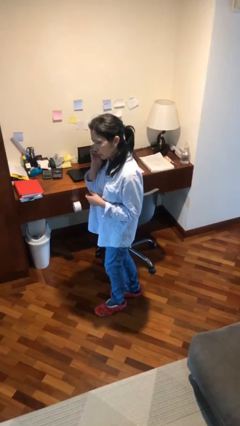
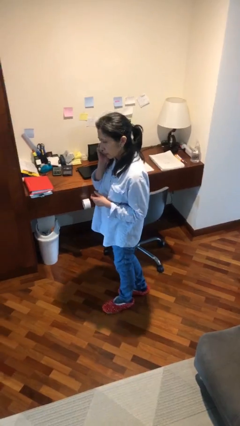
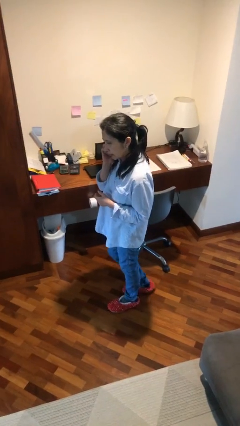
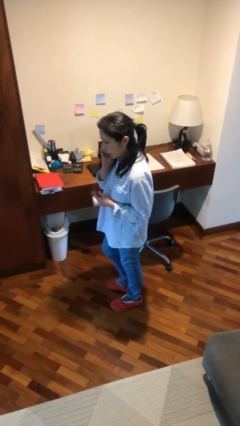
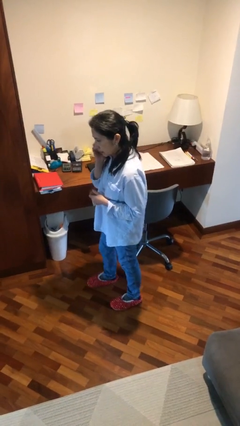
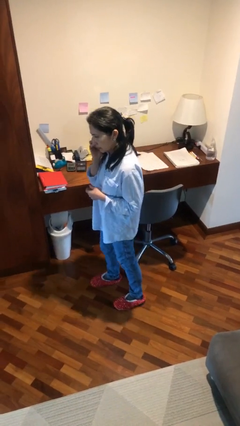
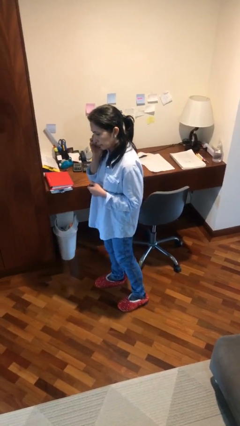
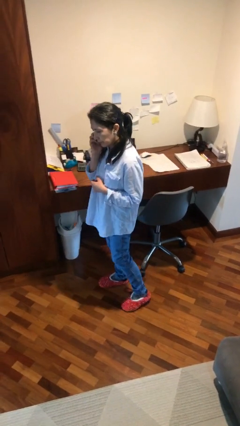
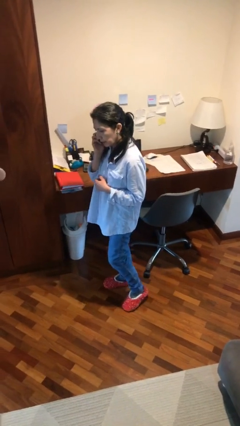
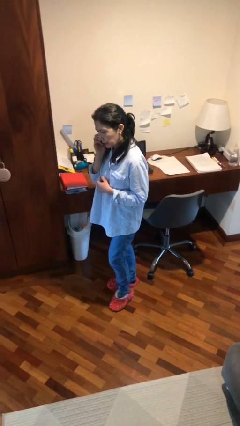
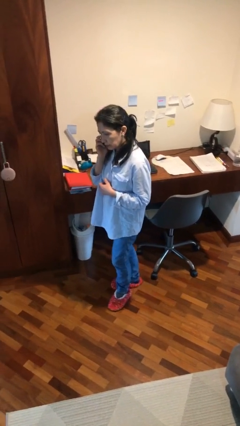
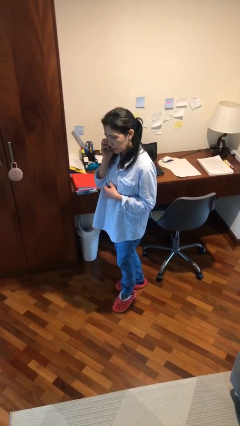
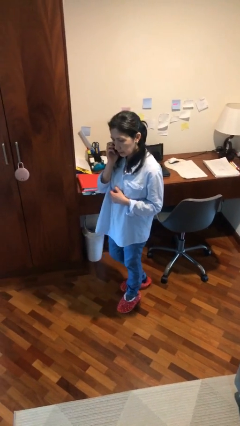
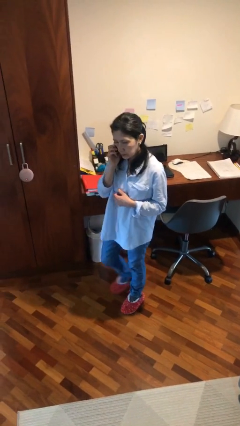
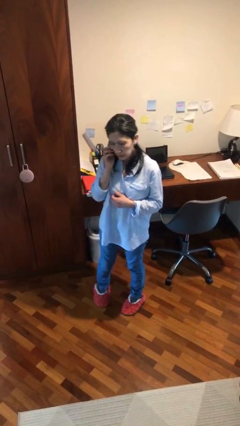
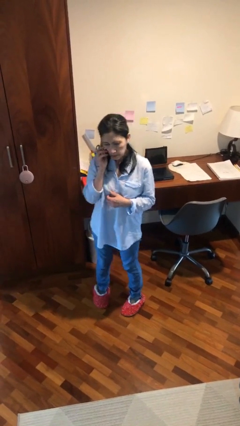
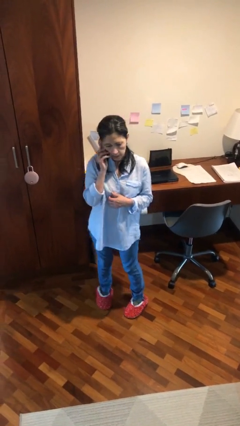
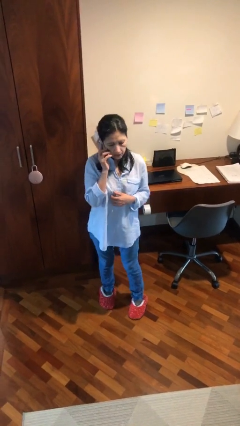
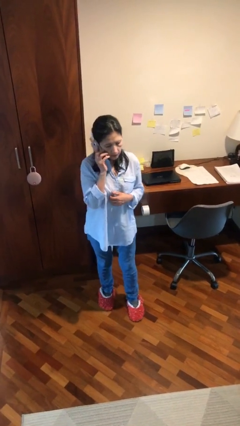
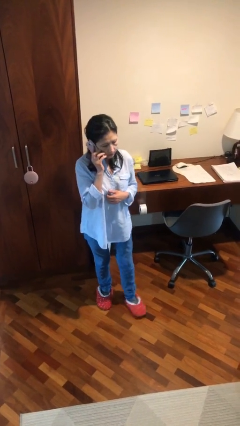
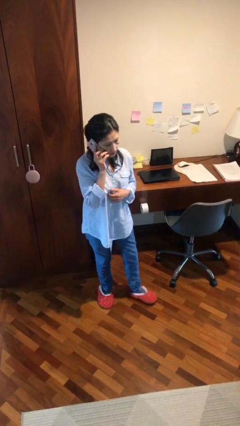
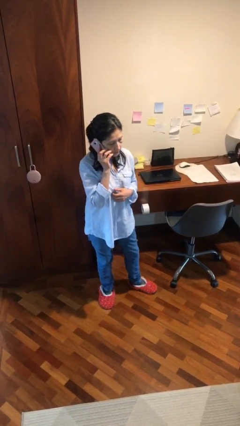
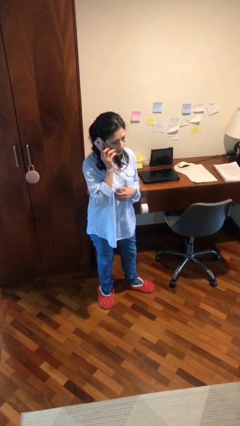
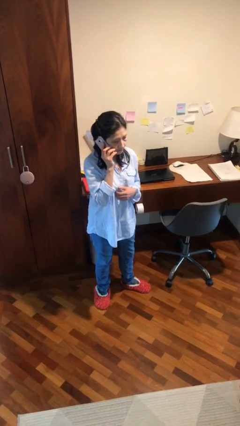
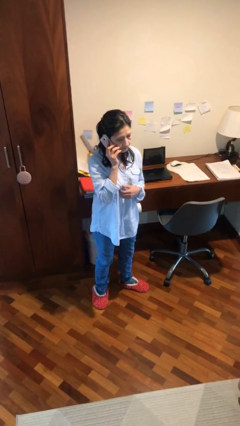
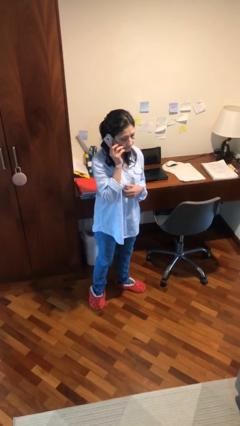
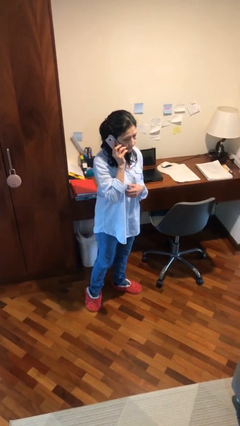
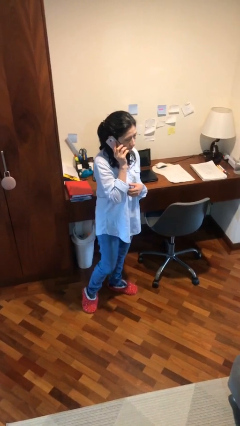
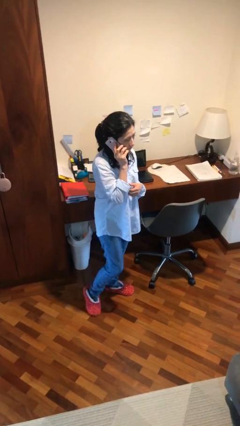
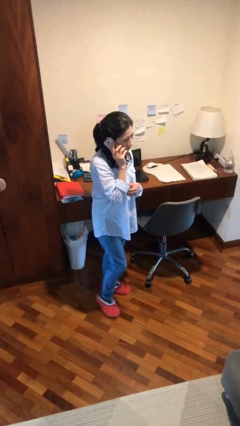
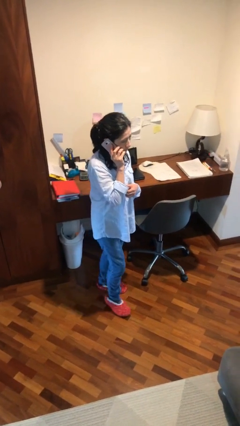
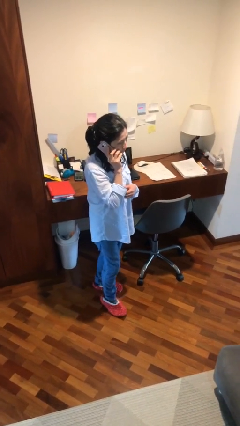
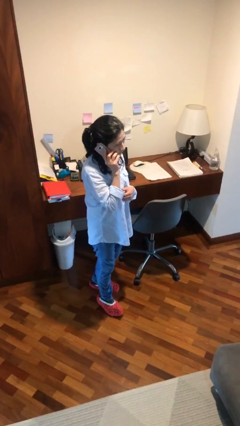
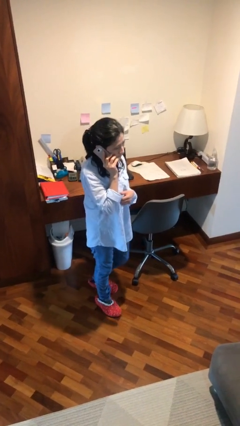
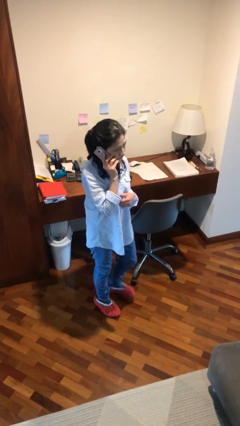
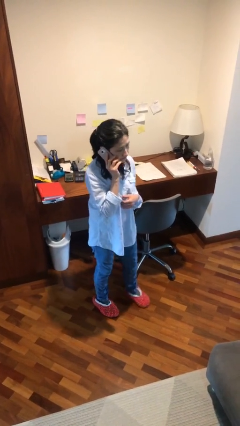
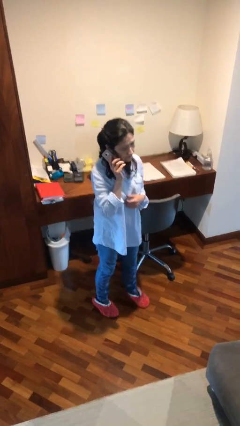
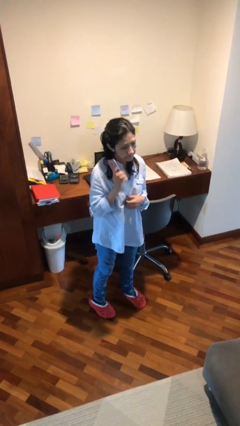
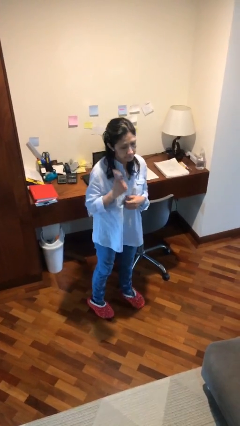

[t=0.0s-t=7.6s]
person talks on phone

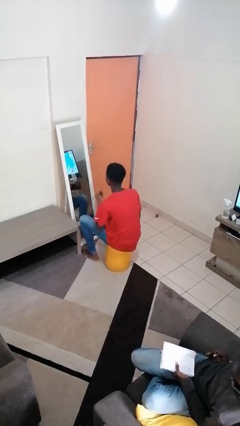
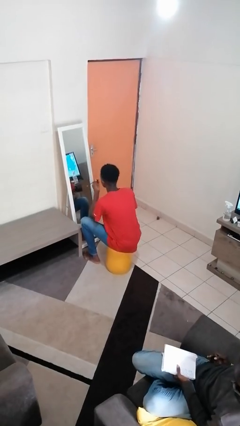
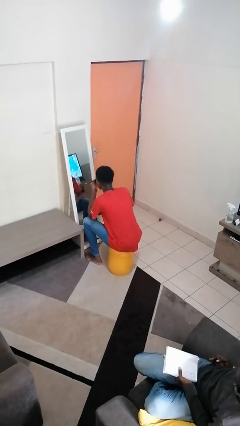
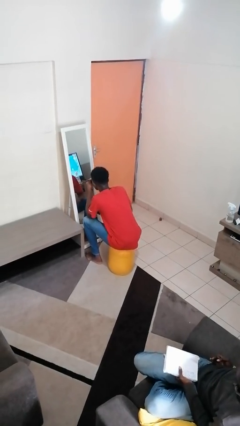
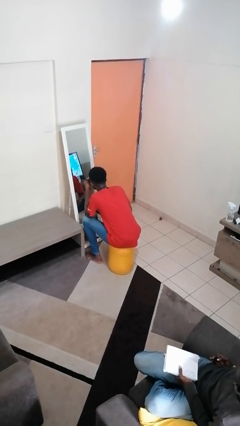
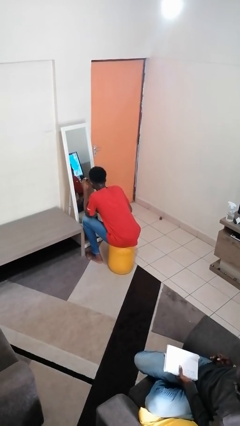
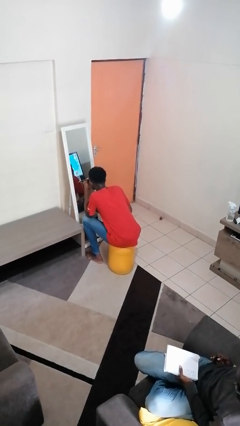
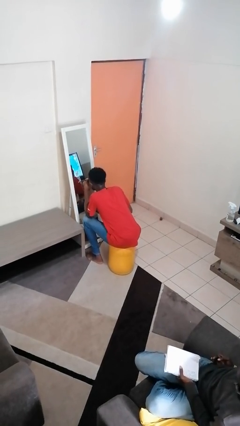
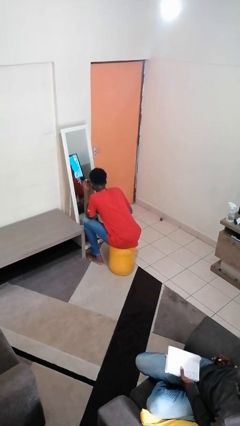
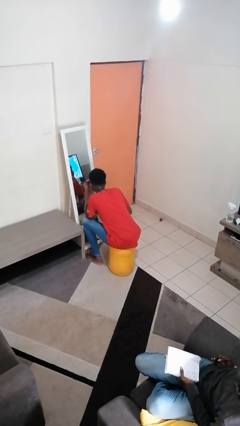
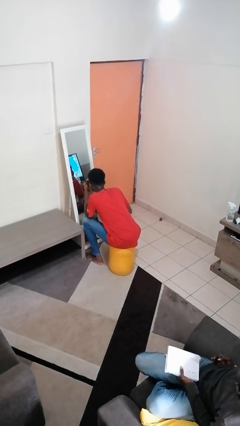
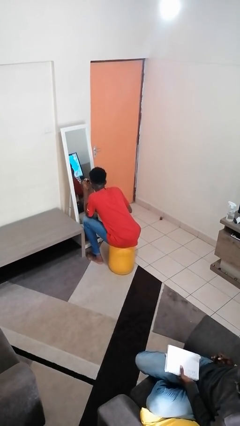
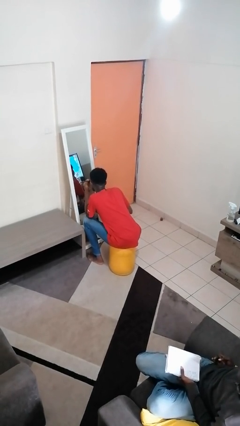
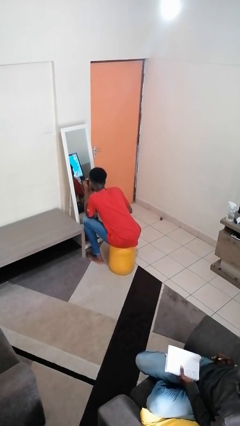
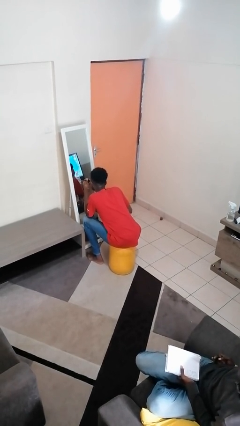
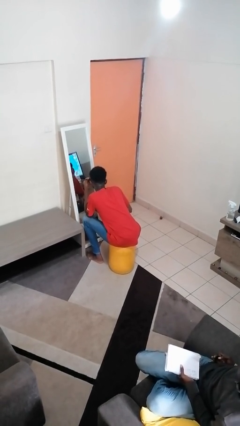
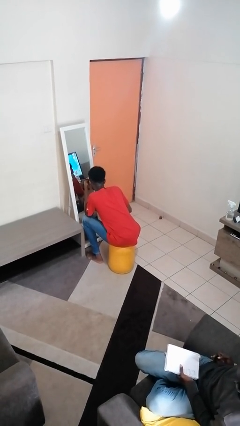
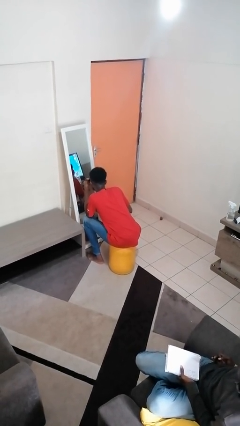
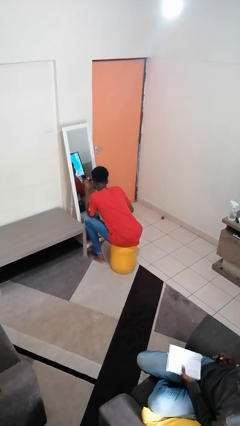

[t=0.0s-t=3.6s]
person applies eye makeup

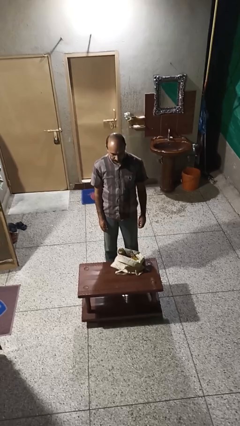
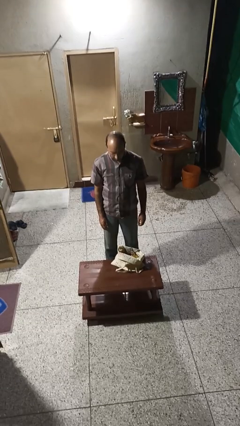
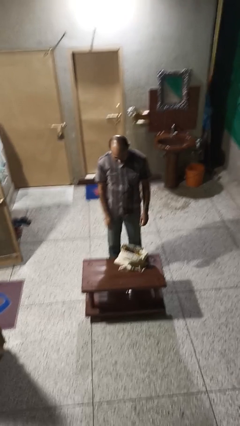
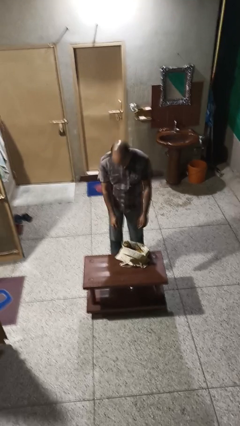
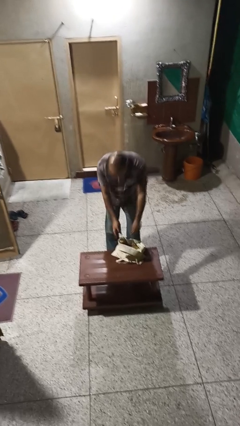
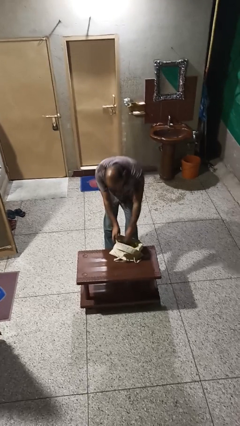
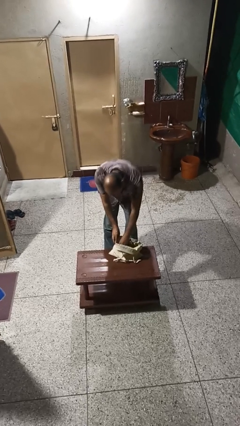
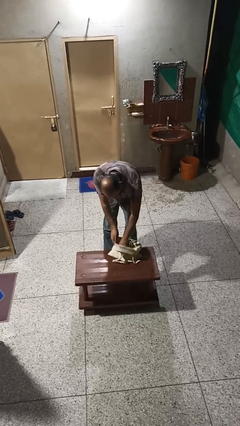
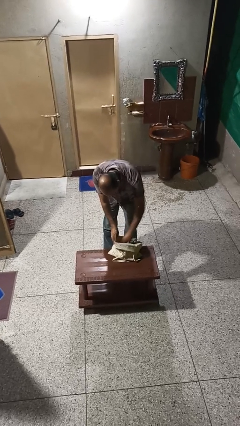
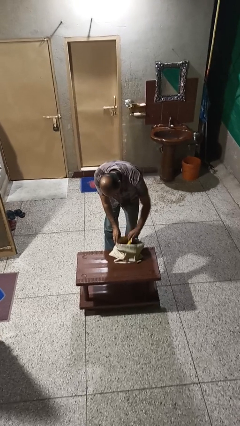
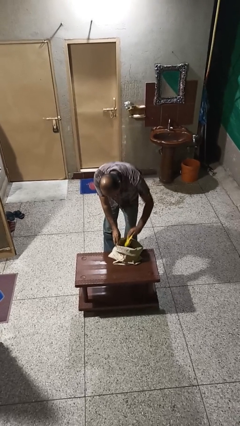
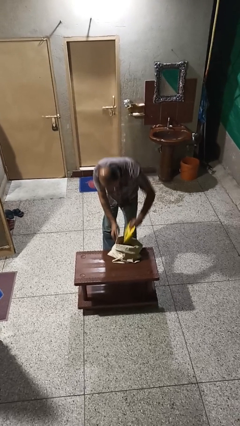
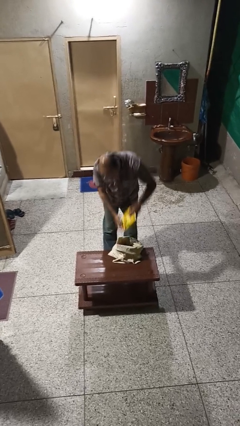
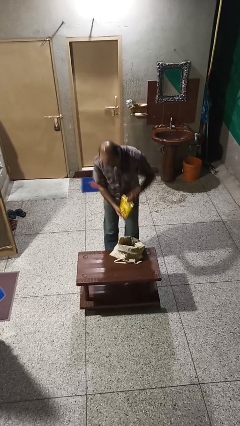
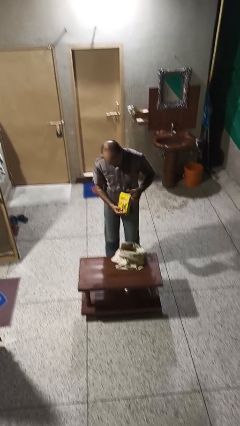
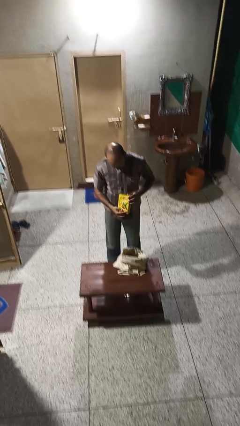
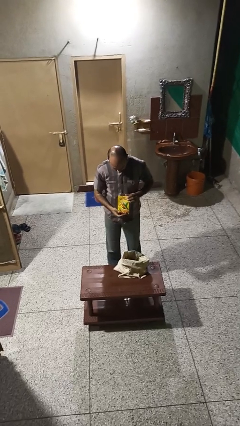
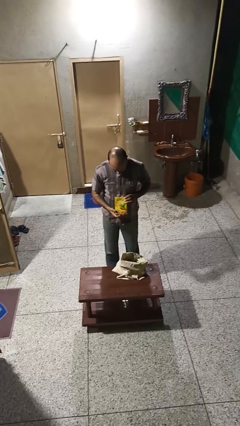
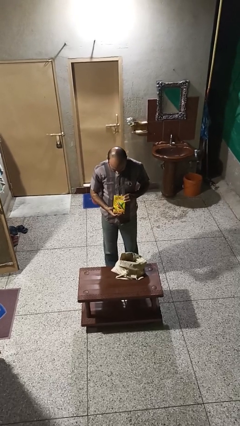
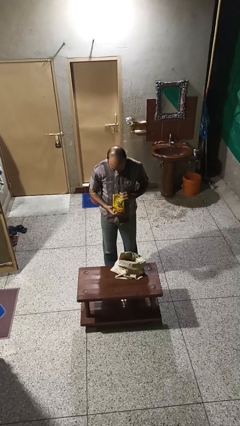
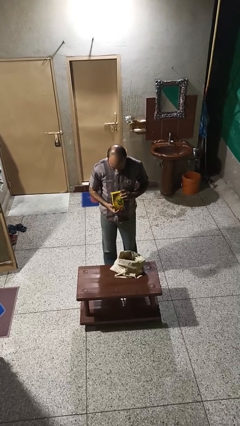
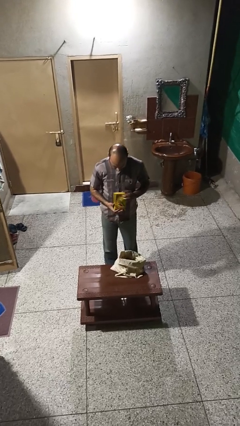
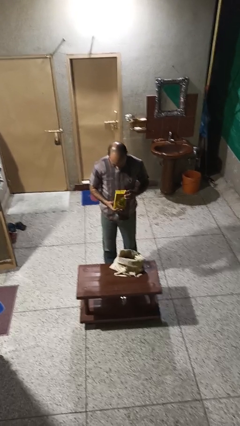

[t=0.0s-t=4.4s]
person takes object from bag

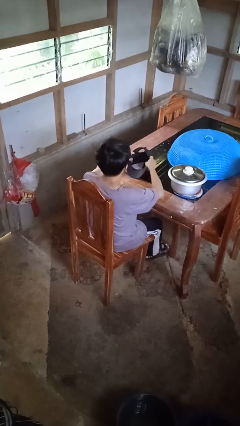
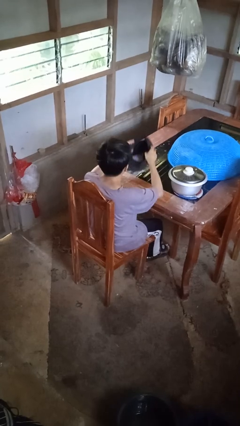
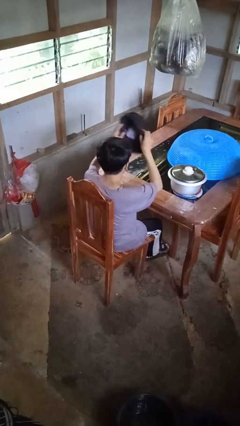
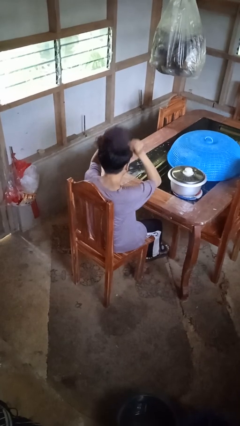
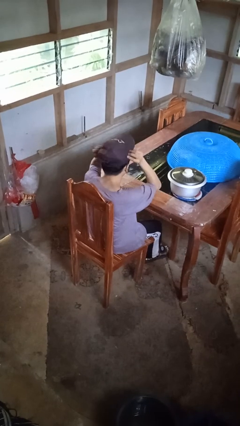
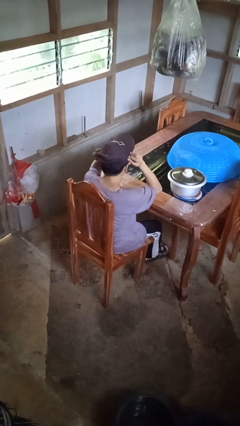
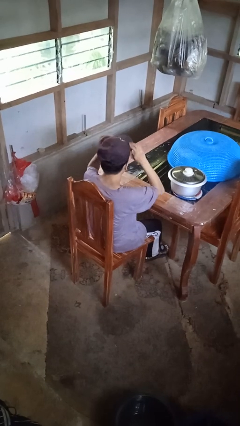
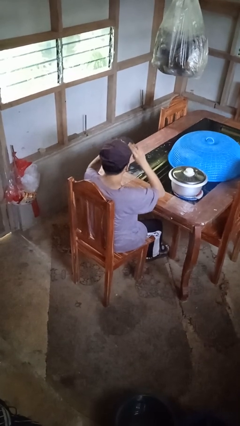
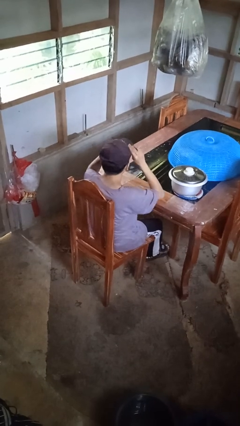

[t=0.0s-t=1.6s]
person puts on hat

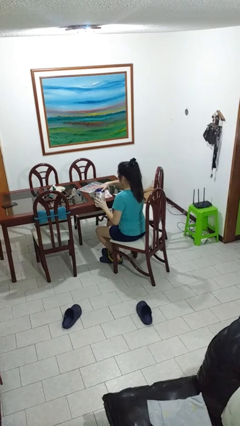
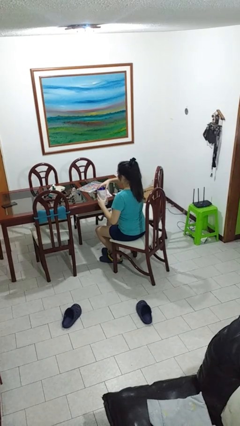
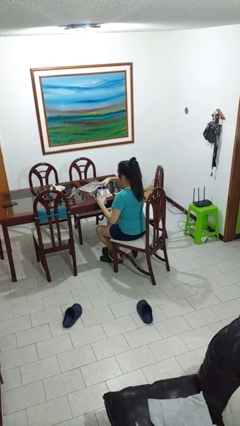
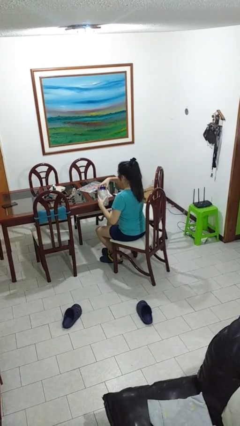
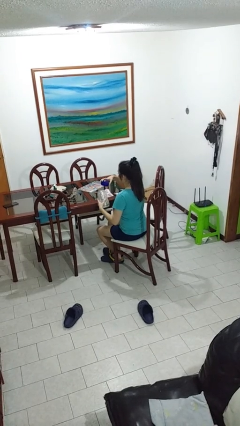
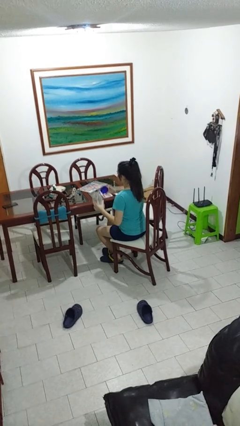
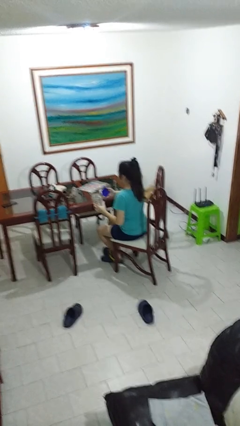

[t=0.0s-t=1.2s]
person opens jar
